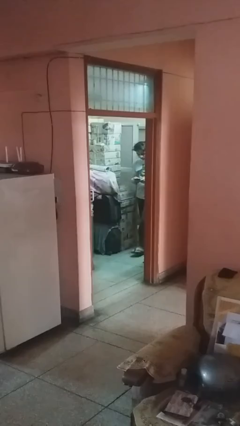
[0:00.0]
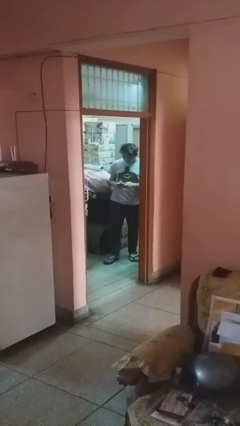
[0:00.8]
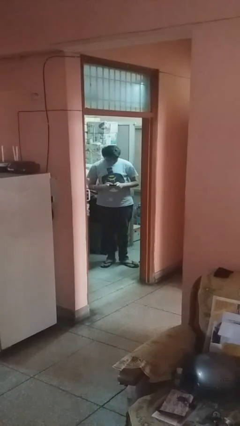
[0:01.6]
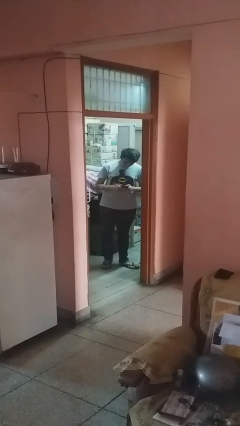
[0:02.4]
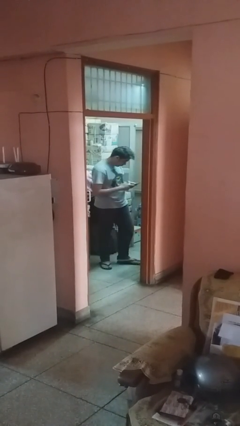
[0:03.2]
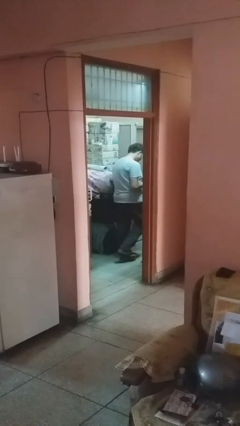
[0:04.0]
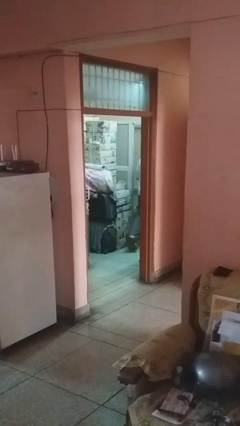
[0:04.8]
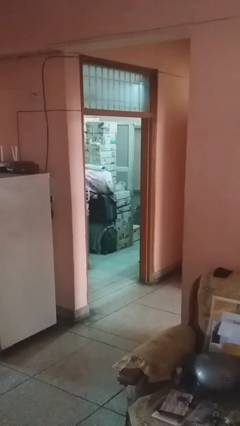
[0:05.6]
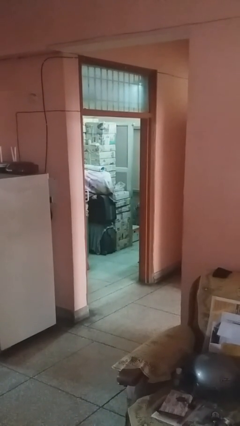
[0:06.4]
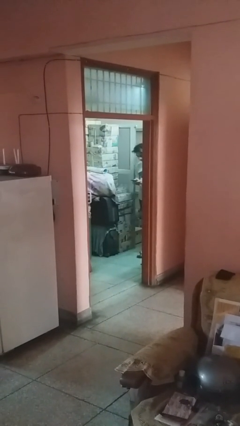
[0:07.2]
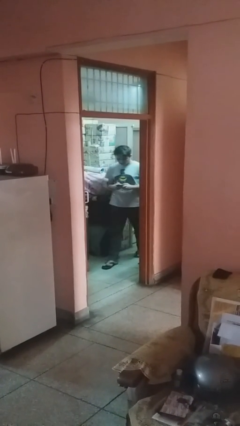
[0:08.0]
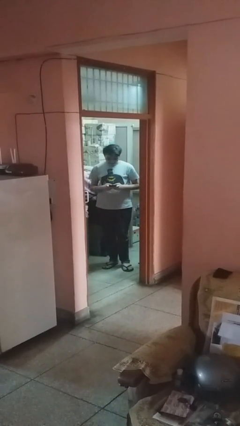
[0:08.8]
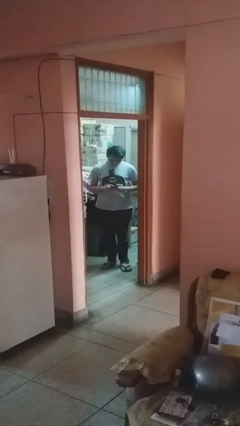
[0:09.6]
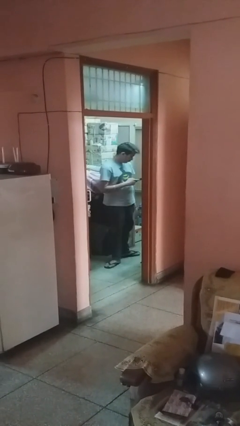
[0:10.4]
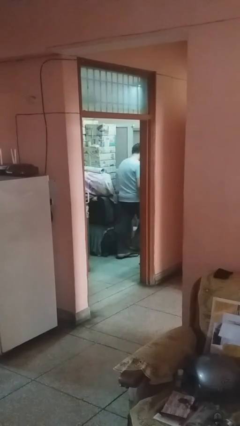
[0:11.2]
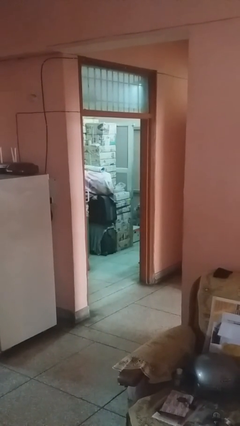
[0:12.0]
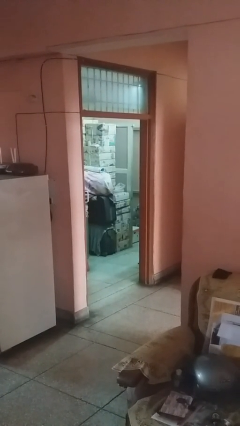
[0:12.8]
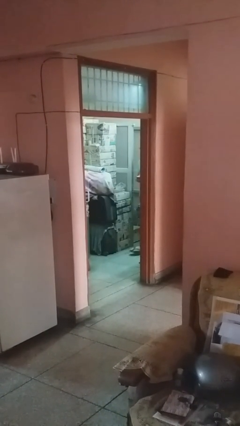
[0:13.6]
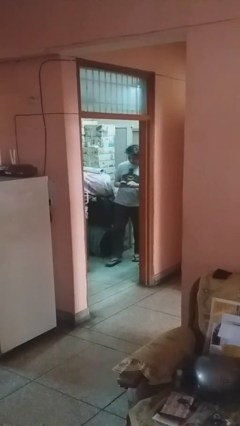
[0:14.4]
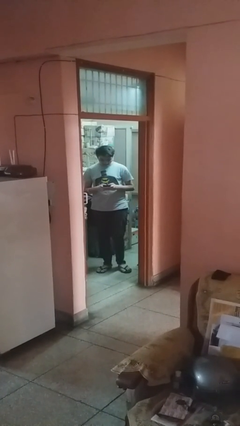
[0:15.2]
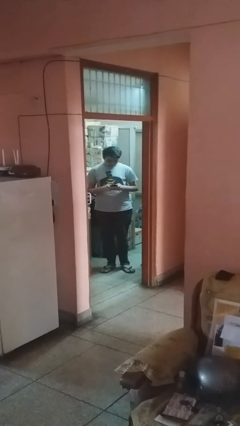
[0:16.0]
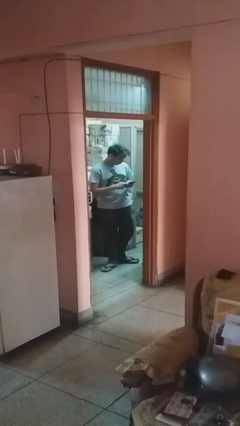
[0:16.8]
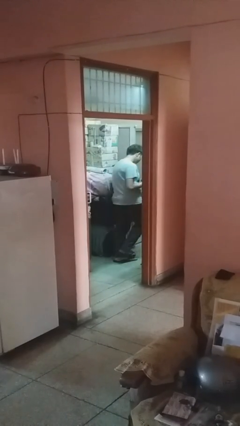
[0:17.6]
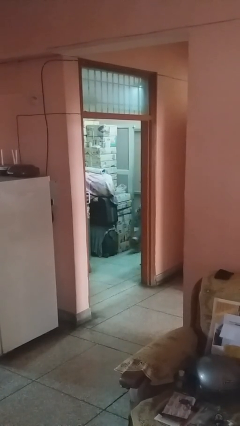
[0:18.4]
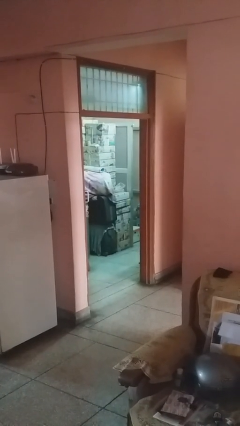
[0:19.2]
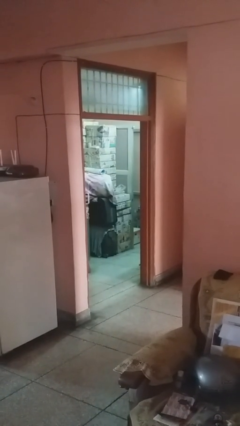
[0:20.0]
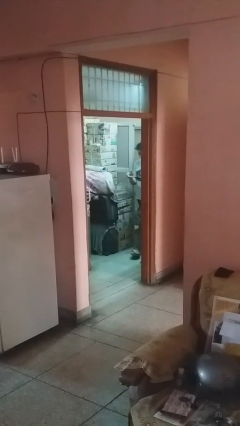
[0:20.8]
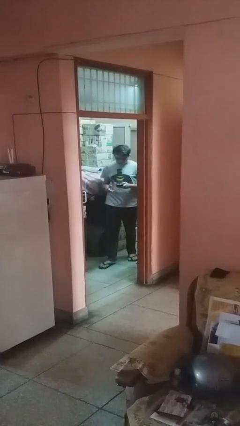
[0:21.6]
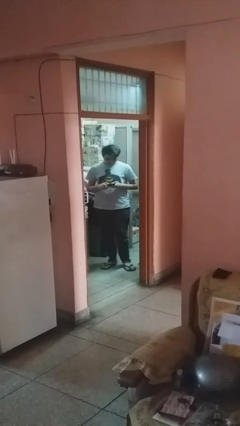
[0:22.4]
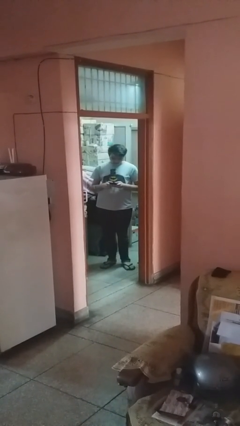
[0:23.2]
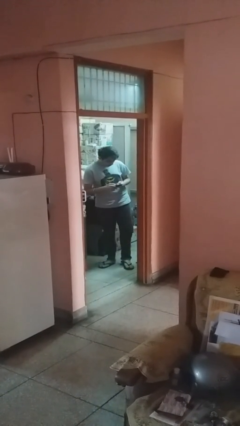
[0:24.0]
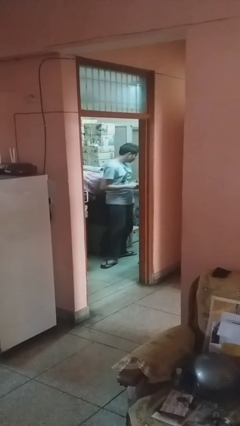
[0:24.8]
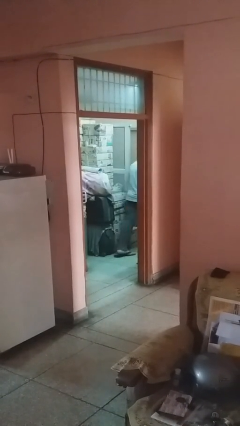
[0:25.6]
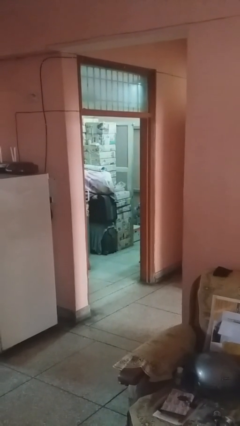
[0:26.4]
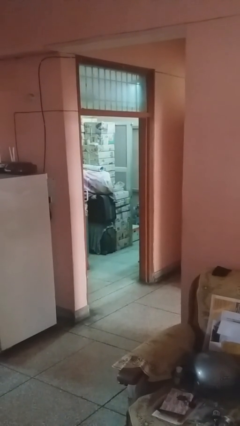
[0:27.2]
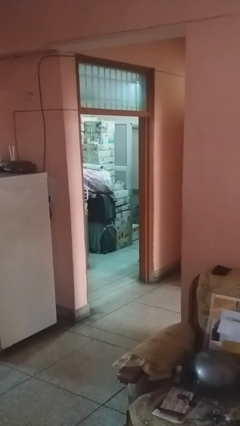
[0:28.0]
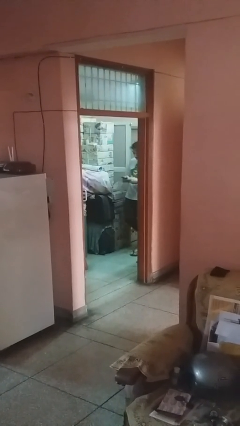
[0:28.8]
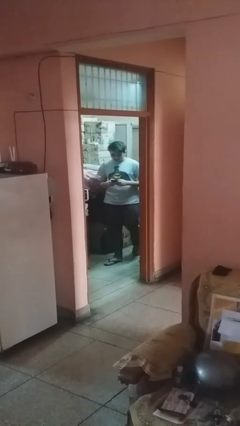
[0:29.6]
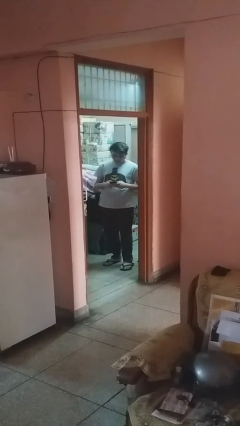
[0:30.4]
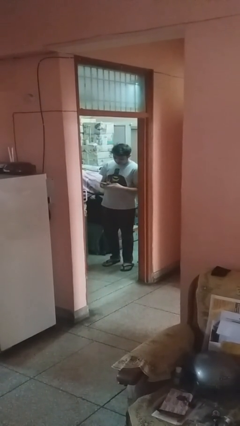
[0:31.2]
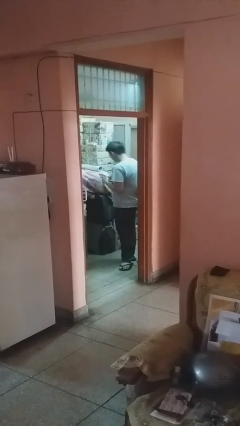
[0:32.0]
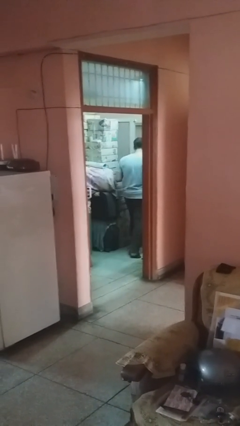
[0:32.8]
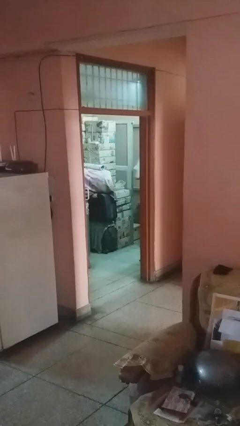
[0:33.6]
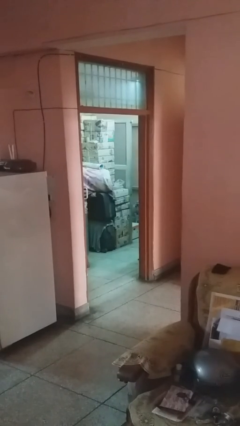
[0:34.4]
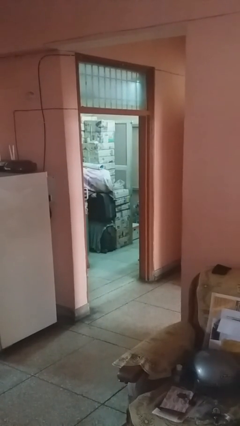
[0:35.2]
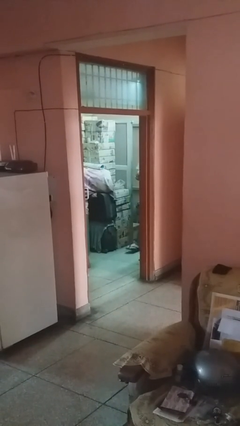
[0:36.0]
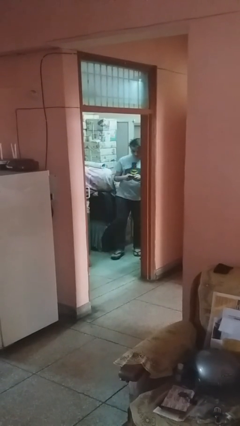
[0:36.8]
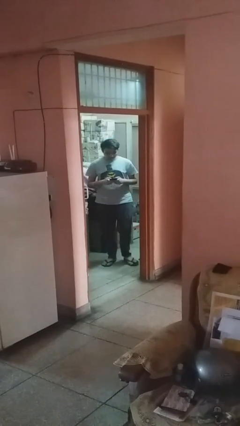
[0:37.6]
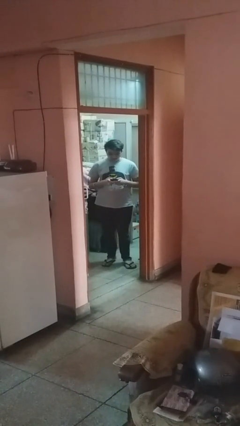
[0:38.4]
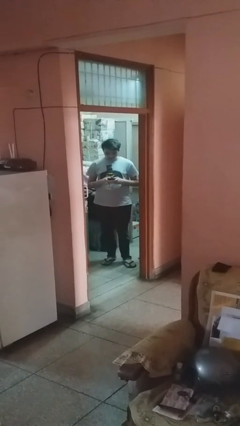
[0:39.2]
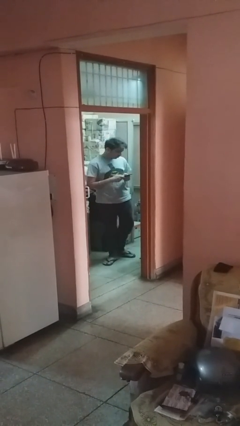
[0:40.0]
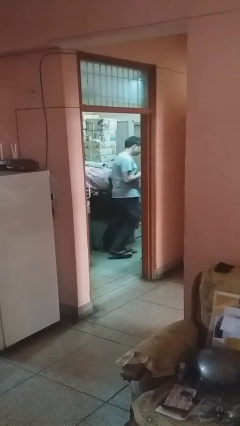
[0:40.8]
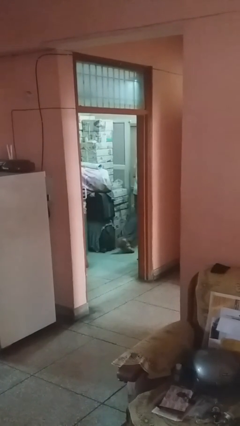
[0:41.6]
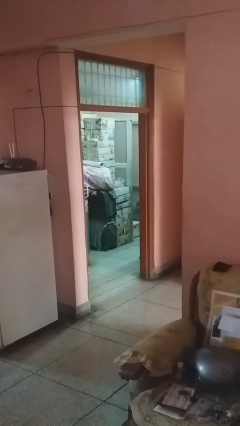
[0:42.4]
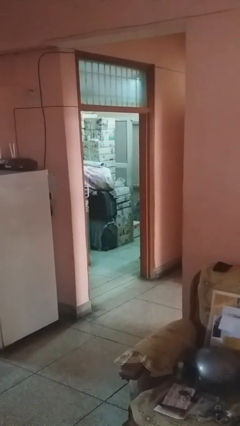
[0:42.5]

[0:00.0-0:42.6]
person texts on phone

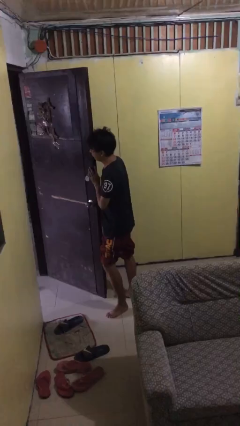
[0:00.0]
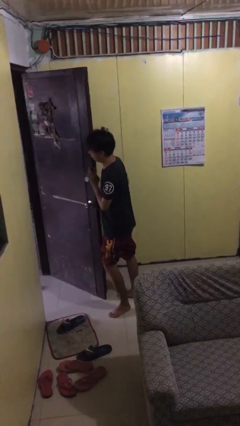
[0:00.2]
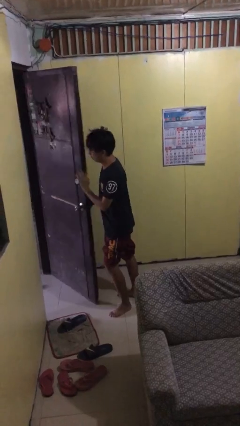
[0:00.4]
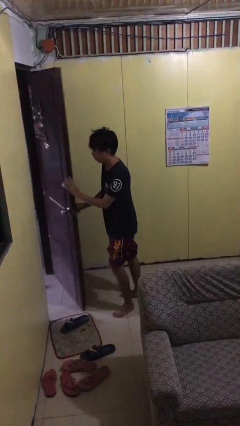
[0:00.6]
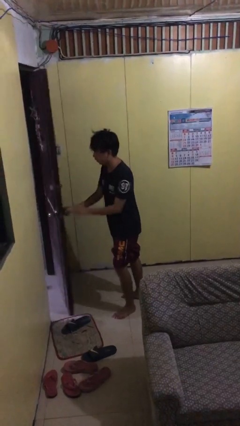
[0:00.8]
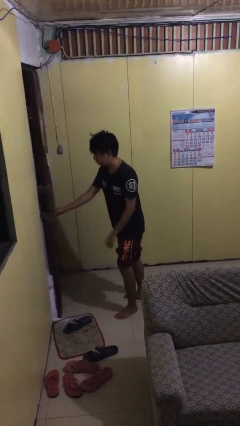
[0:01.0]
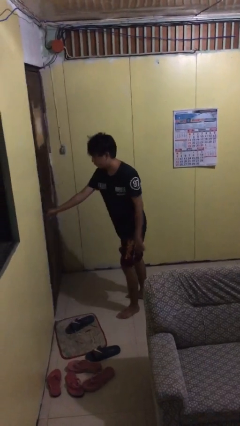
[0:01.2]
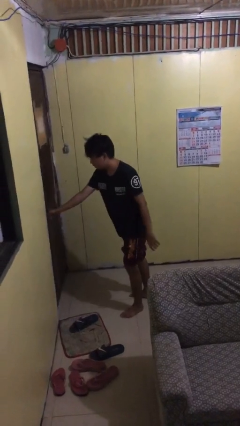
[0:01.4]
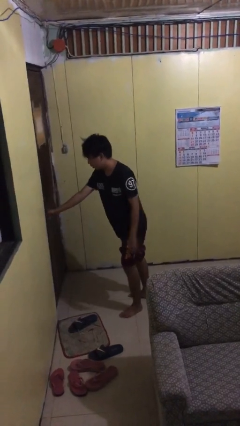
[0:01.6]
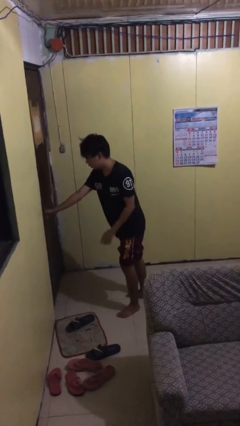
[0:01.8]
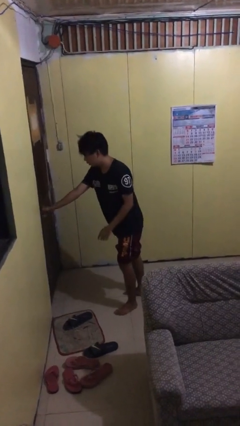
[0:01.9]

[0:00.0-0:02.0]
person closes facility door

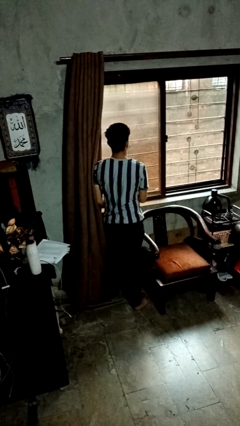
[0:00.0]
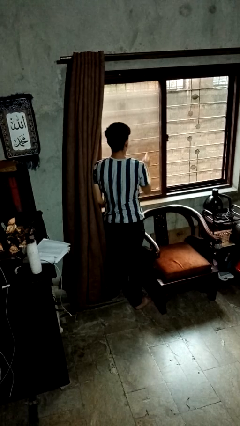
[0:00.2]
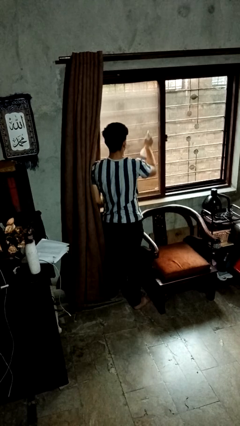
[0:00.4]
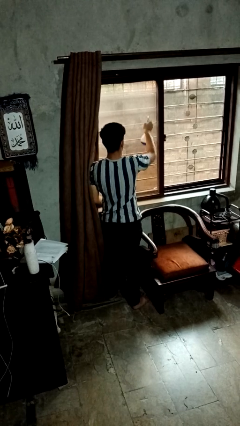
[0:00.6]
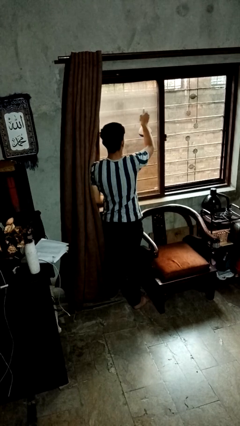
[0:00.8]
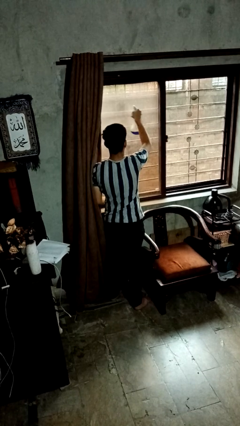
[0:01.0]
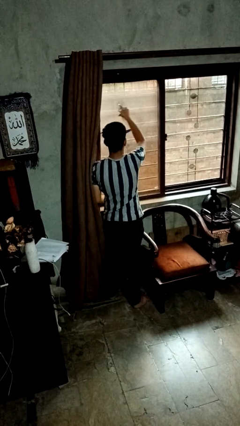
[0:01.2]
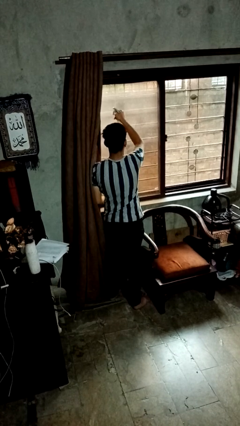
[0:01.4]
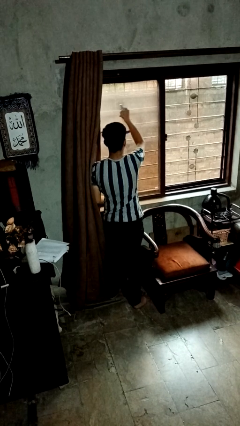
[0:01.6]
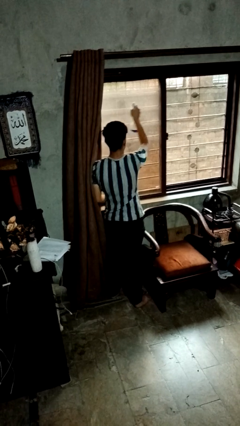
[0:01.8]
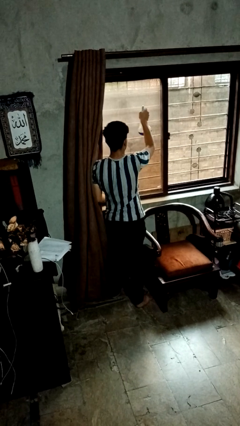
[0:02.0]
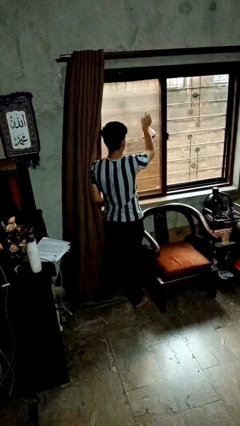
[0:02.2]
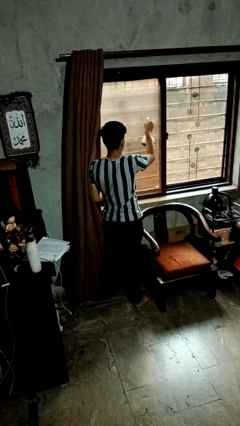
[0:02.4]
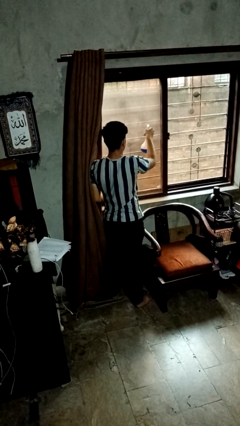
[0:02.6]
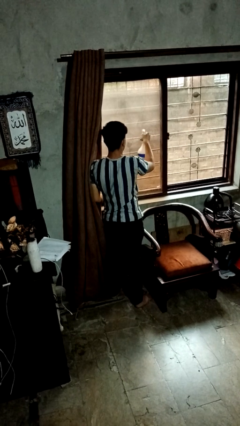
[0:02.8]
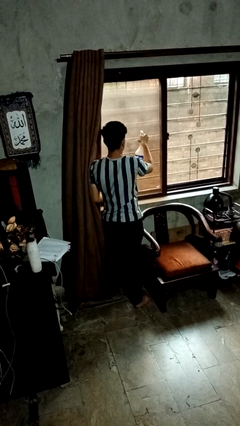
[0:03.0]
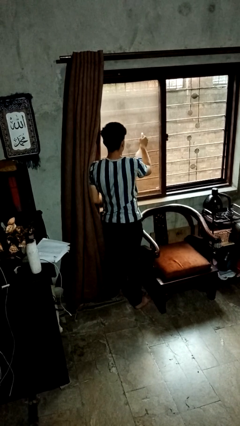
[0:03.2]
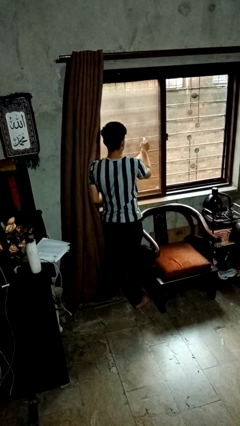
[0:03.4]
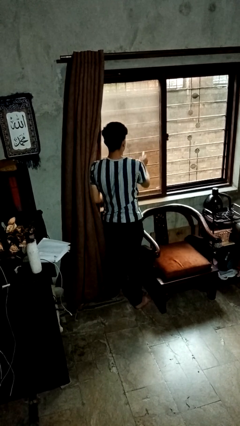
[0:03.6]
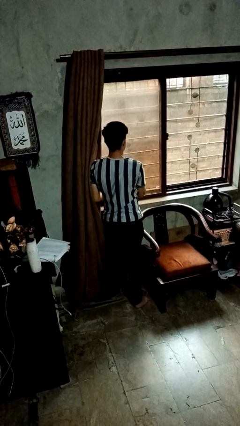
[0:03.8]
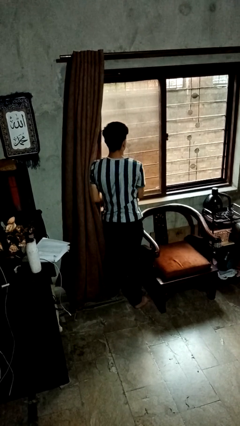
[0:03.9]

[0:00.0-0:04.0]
person sprays from bottle

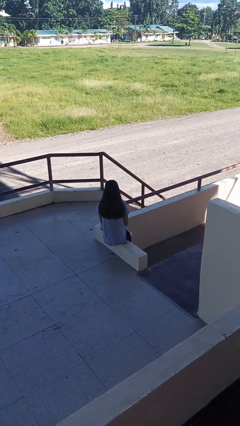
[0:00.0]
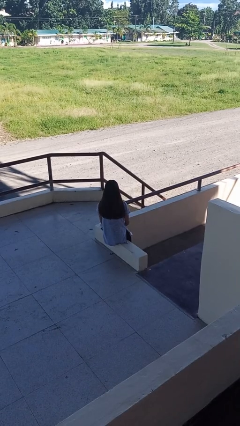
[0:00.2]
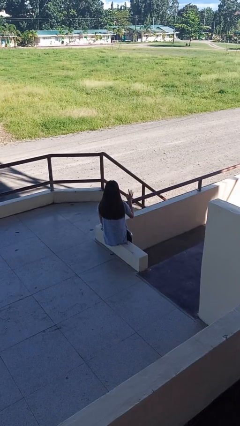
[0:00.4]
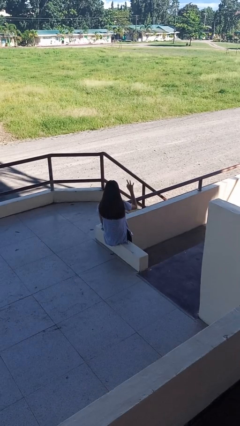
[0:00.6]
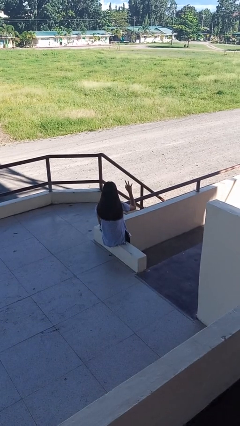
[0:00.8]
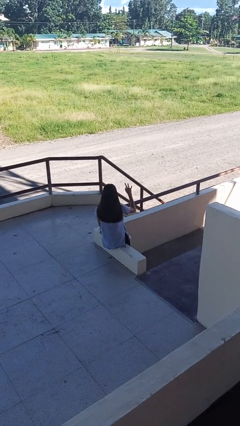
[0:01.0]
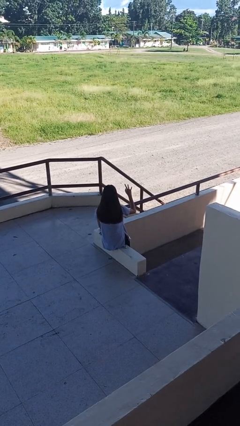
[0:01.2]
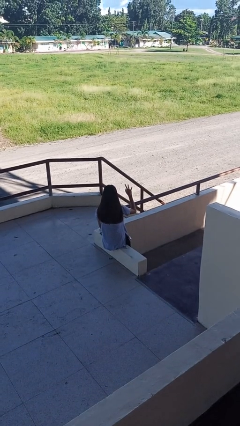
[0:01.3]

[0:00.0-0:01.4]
person gestures number three
